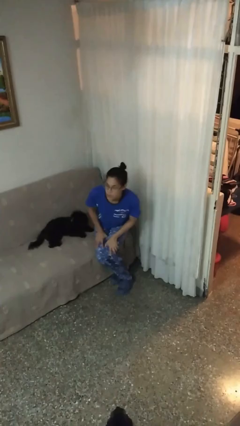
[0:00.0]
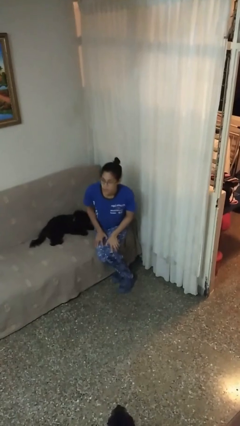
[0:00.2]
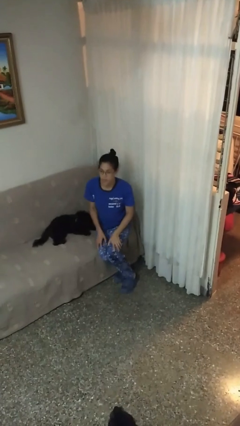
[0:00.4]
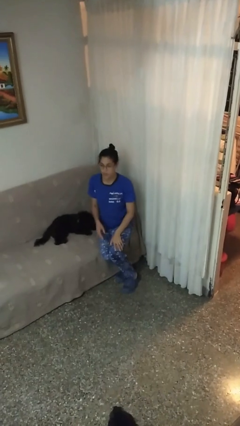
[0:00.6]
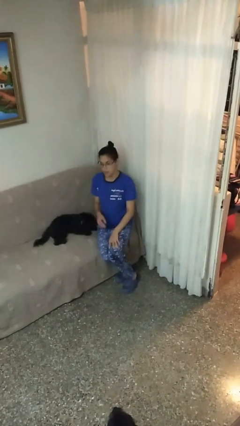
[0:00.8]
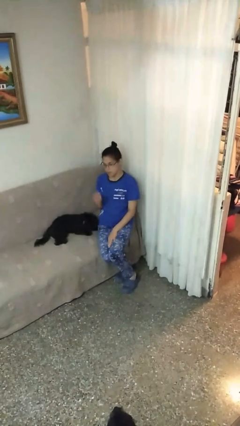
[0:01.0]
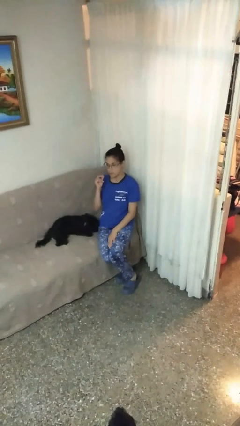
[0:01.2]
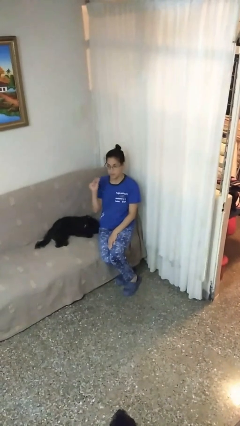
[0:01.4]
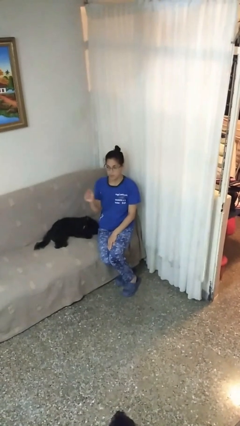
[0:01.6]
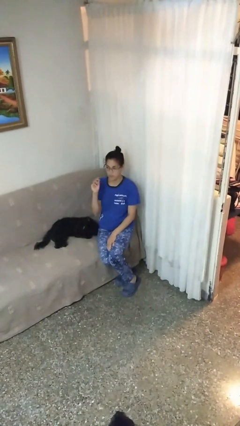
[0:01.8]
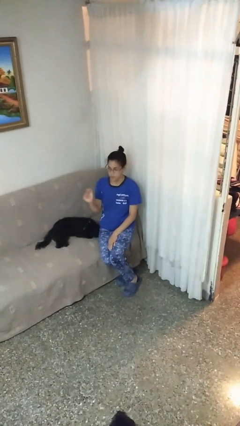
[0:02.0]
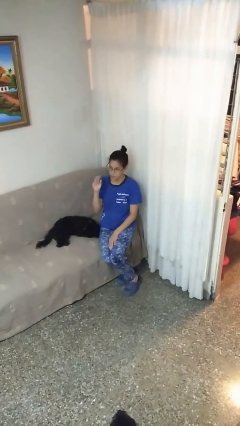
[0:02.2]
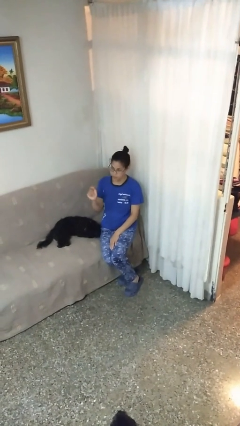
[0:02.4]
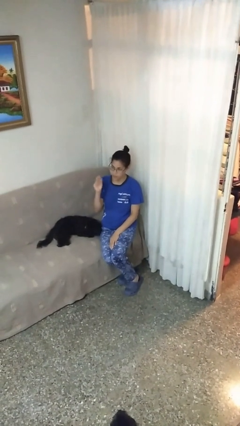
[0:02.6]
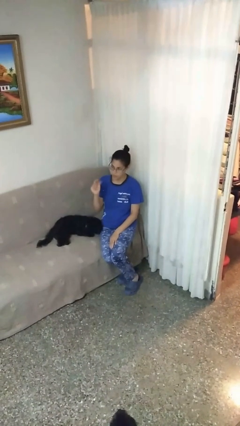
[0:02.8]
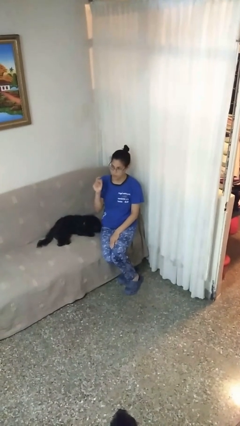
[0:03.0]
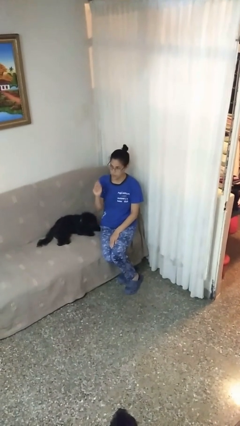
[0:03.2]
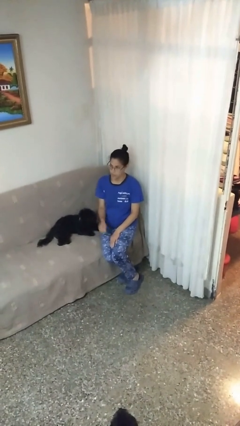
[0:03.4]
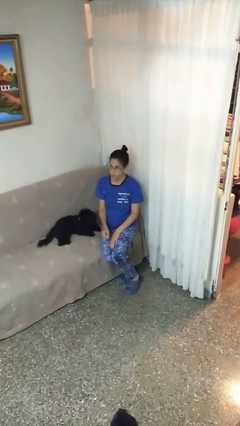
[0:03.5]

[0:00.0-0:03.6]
person snaps fingers

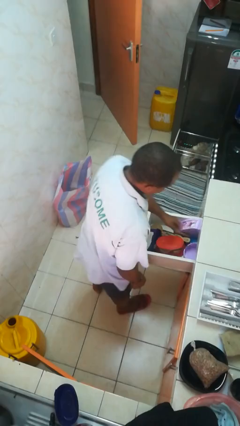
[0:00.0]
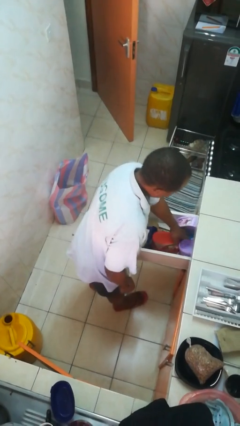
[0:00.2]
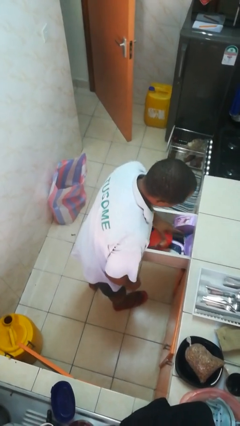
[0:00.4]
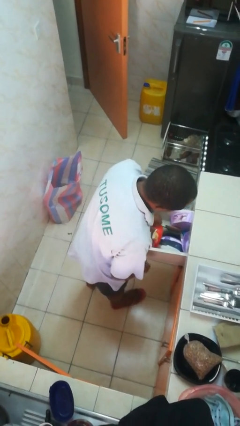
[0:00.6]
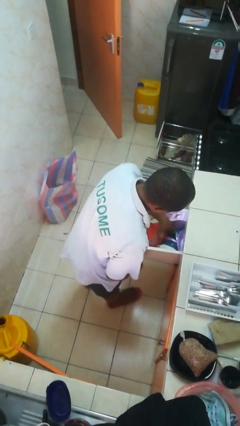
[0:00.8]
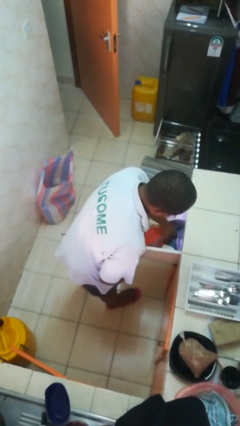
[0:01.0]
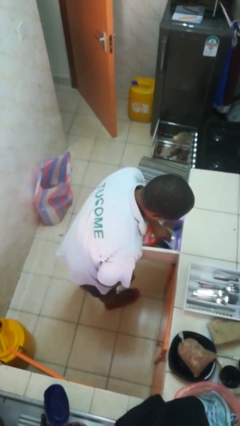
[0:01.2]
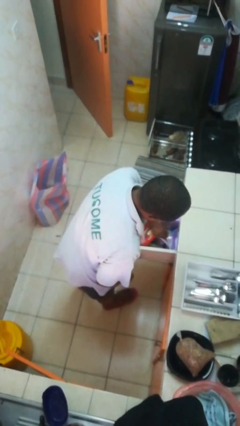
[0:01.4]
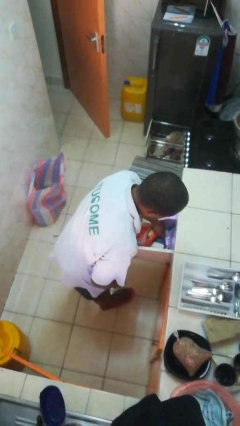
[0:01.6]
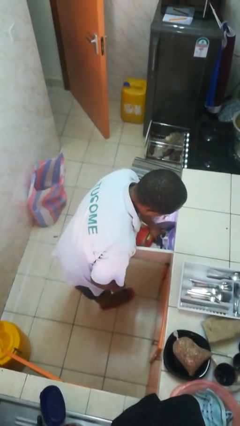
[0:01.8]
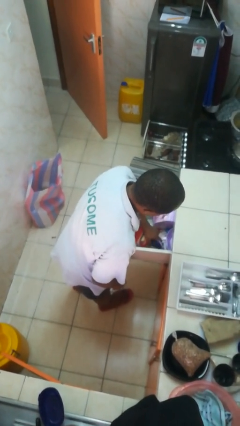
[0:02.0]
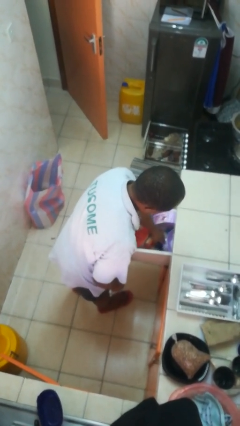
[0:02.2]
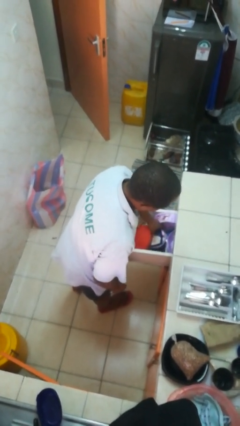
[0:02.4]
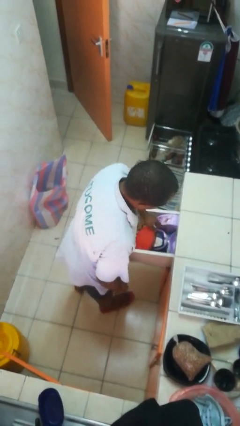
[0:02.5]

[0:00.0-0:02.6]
person searches in kitchen drawer

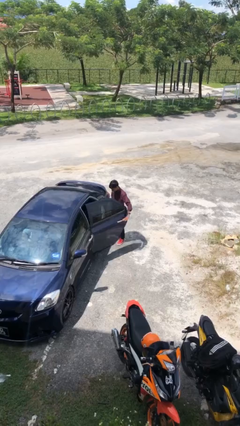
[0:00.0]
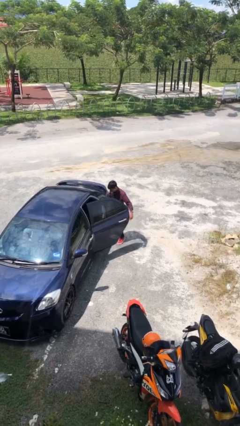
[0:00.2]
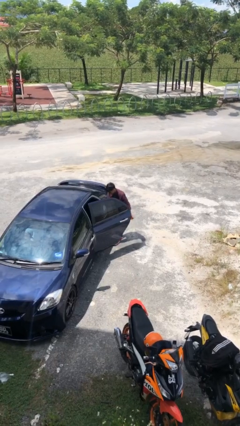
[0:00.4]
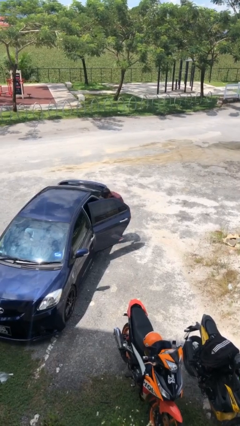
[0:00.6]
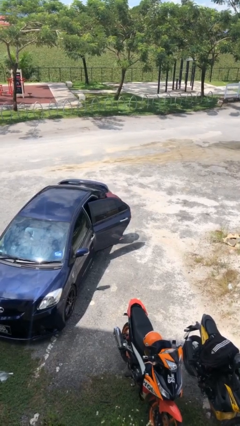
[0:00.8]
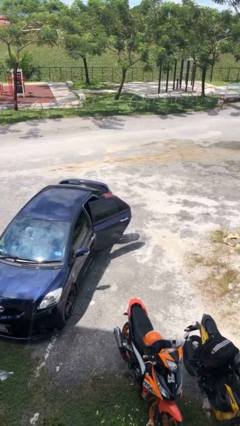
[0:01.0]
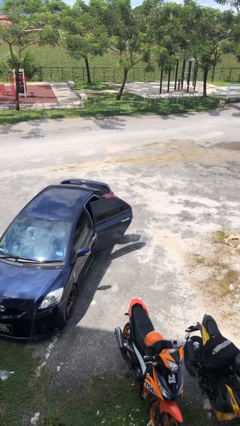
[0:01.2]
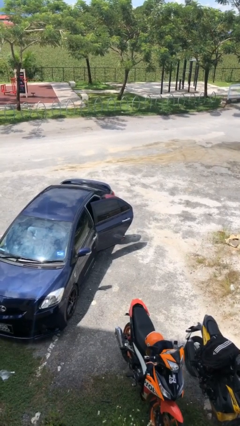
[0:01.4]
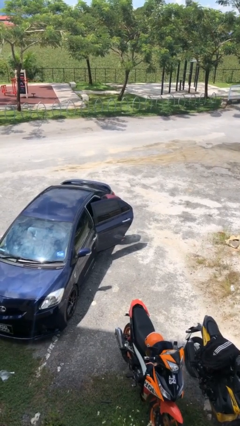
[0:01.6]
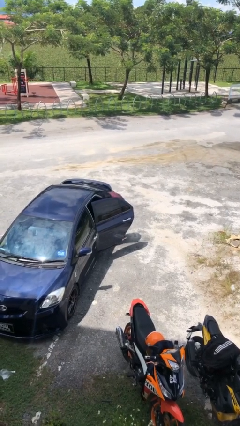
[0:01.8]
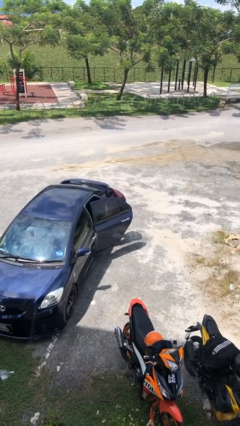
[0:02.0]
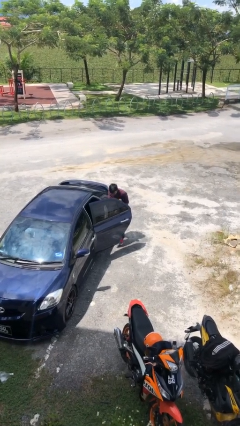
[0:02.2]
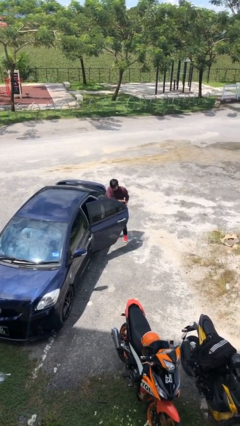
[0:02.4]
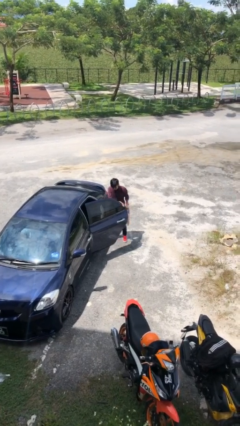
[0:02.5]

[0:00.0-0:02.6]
person unloads car

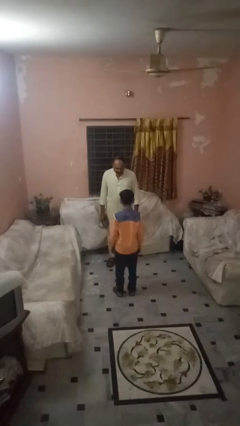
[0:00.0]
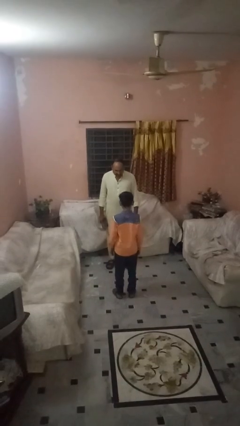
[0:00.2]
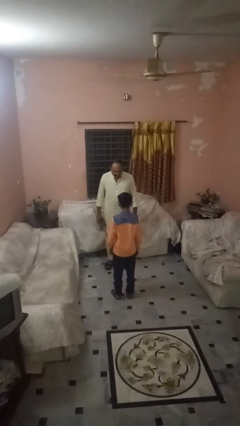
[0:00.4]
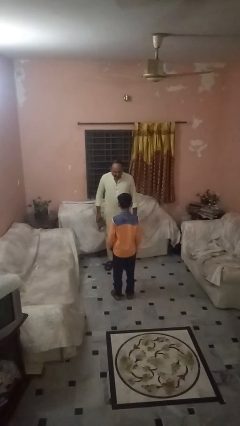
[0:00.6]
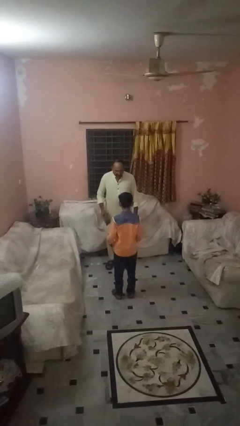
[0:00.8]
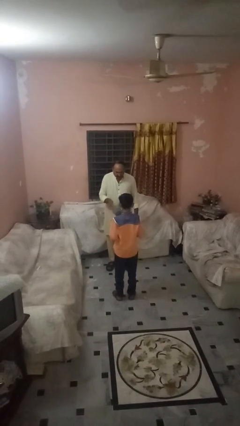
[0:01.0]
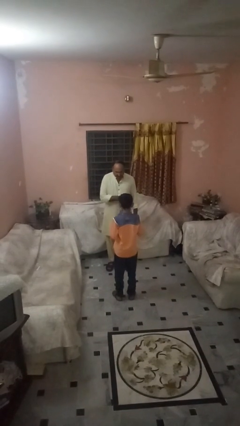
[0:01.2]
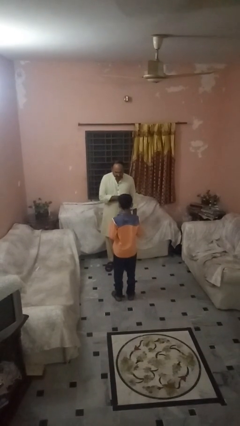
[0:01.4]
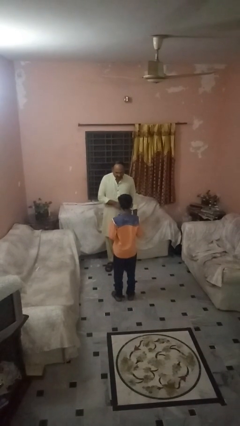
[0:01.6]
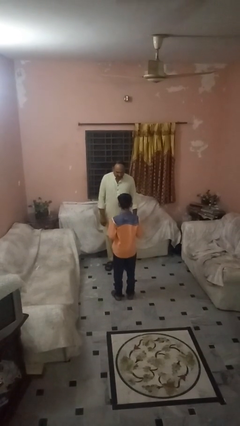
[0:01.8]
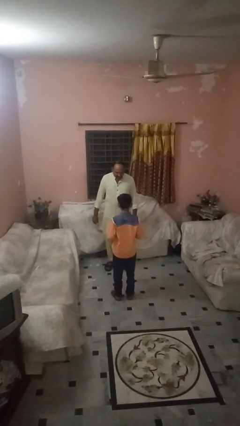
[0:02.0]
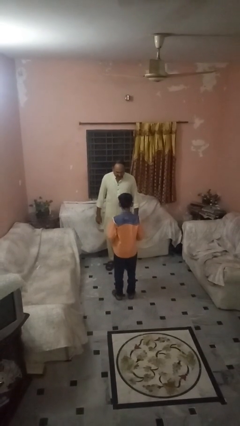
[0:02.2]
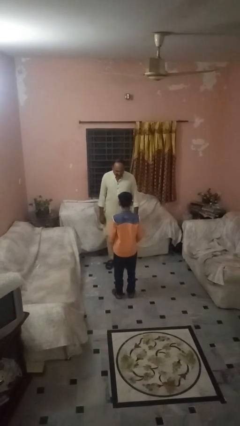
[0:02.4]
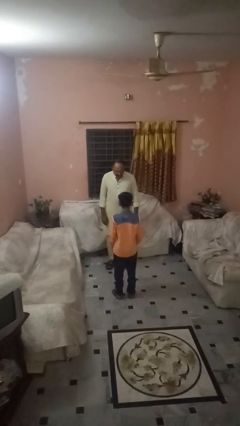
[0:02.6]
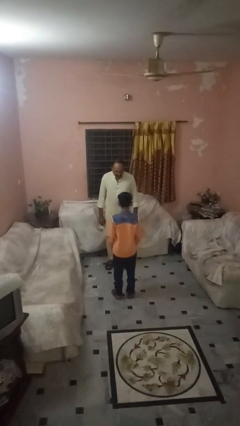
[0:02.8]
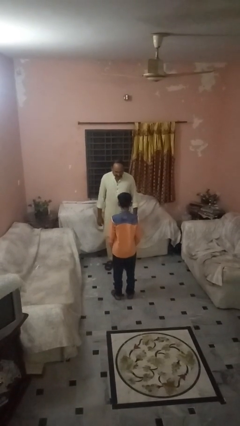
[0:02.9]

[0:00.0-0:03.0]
person throws object to person

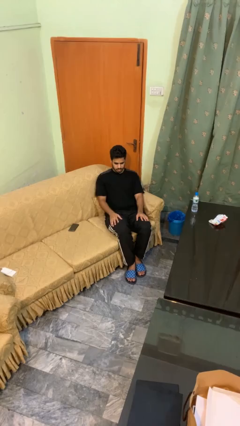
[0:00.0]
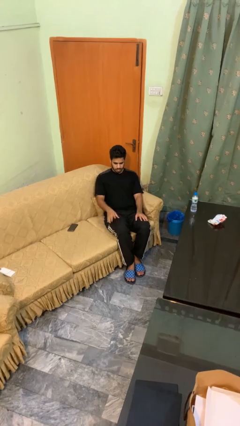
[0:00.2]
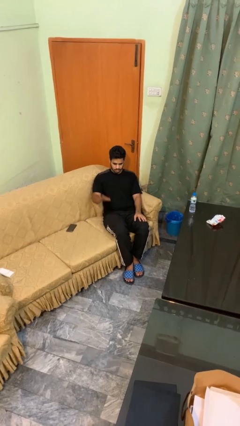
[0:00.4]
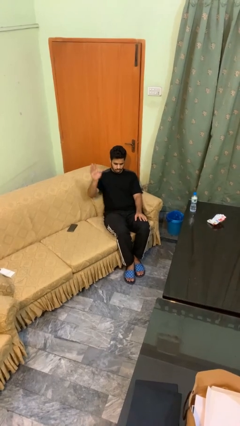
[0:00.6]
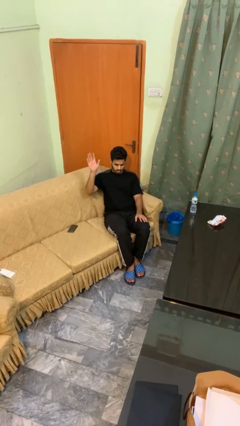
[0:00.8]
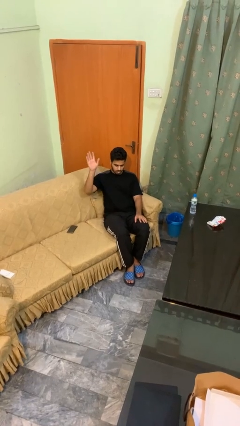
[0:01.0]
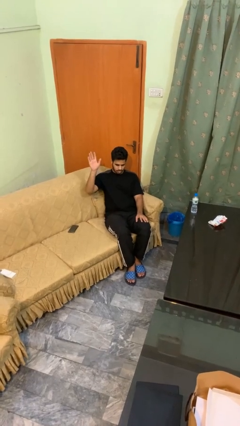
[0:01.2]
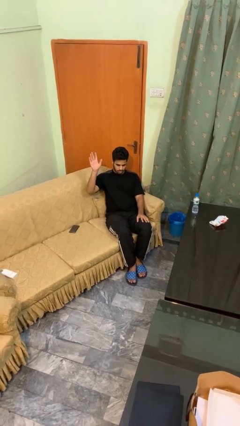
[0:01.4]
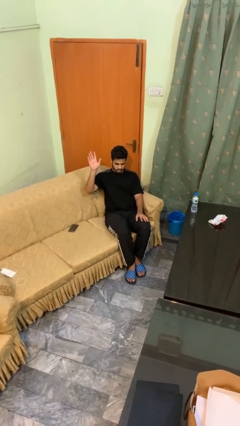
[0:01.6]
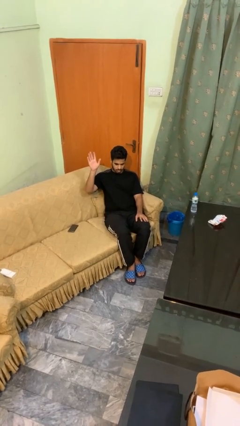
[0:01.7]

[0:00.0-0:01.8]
person gestures raise hand

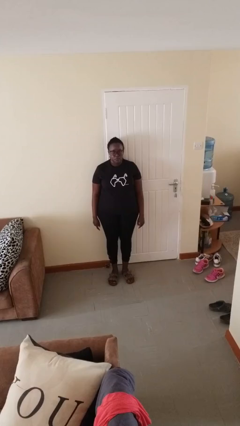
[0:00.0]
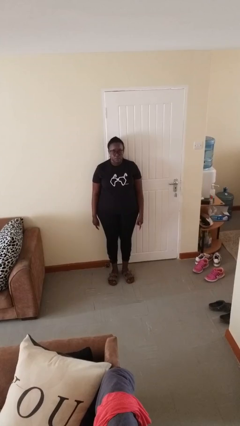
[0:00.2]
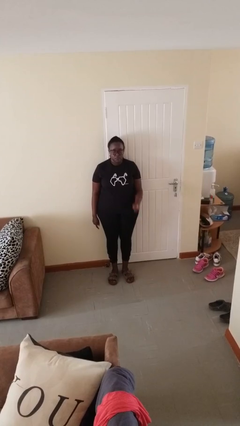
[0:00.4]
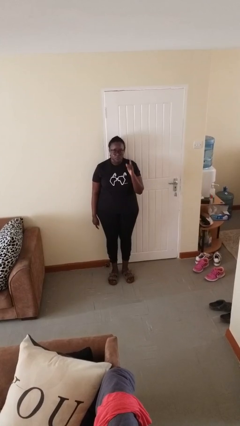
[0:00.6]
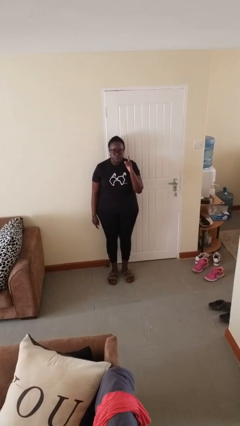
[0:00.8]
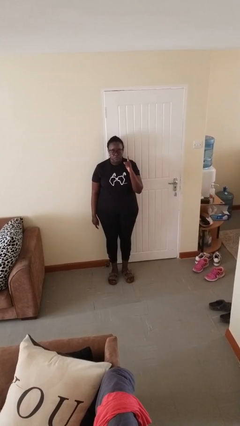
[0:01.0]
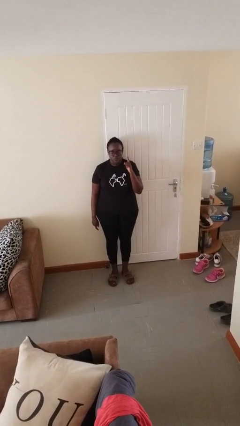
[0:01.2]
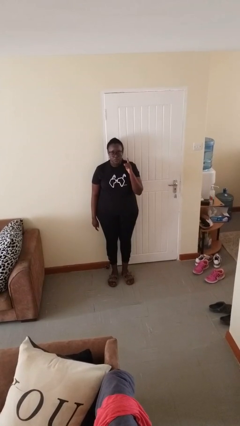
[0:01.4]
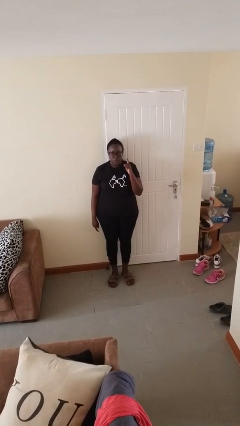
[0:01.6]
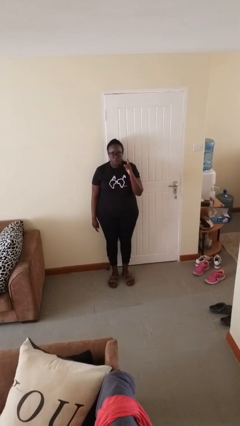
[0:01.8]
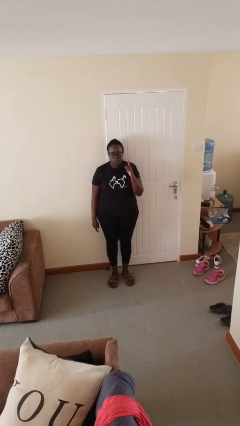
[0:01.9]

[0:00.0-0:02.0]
person gestures number one

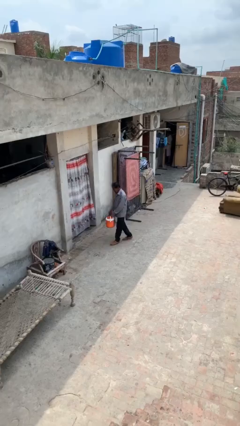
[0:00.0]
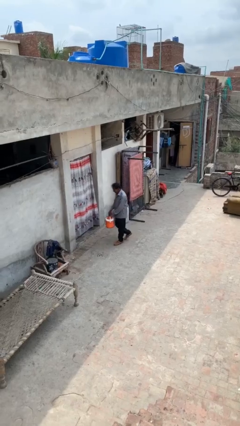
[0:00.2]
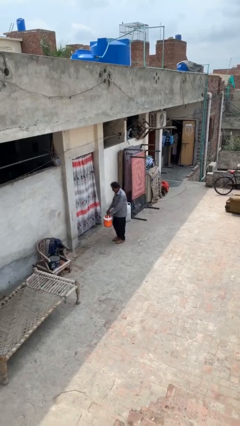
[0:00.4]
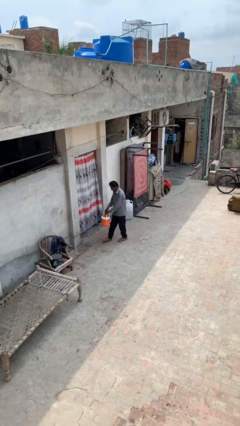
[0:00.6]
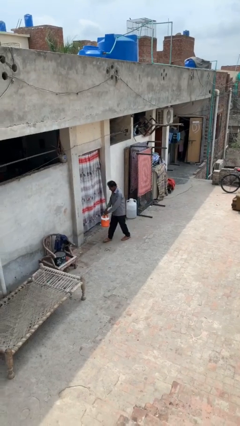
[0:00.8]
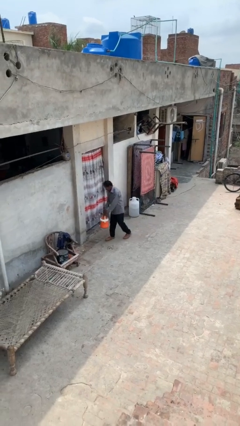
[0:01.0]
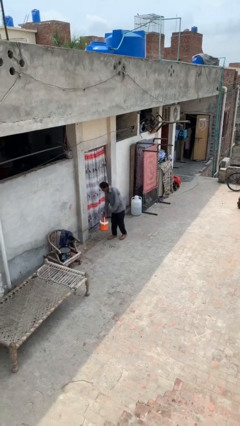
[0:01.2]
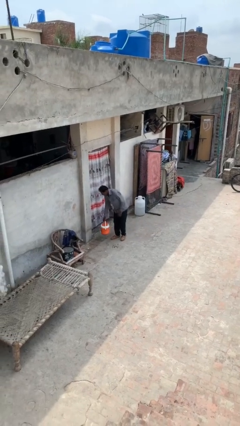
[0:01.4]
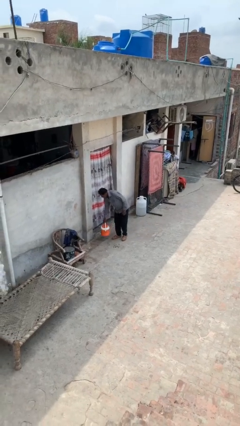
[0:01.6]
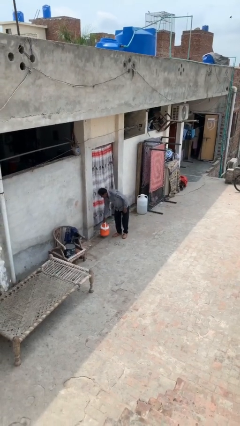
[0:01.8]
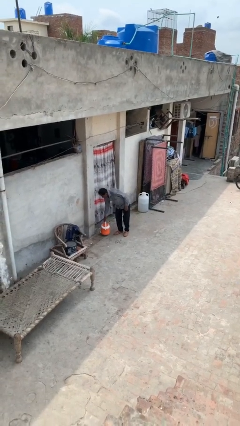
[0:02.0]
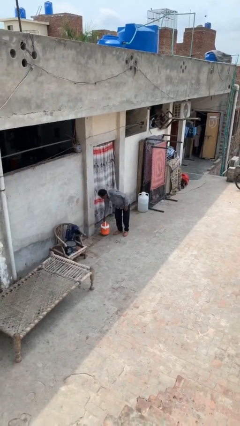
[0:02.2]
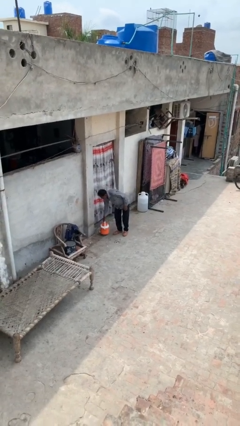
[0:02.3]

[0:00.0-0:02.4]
person puts down object on floor
